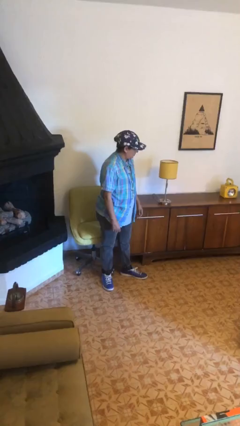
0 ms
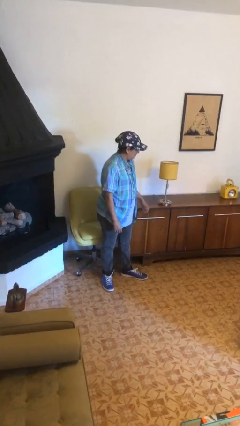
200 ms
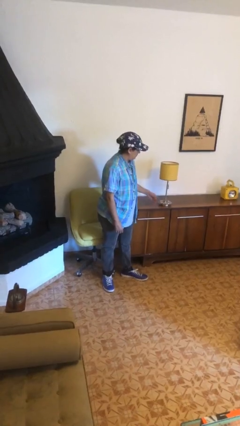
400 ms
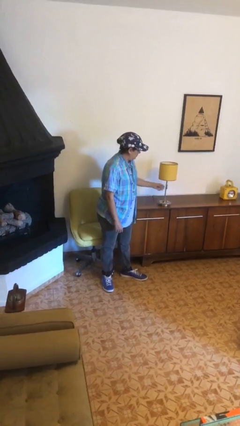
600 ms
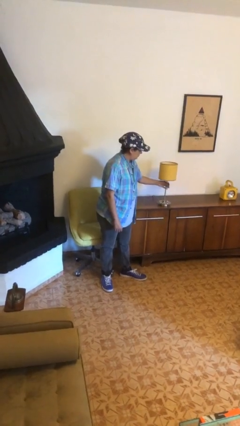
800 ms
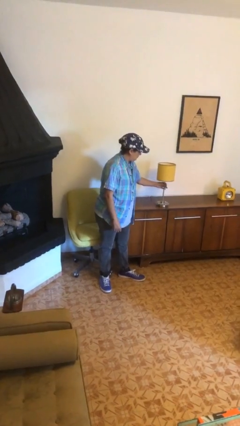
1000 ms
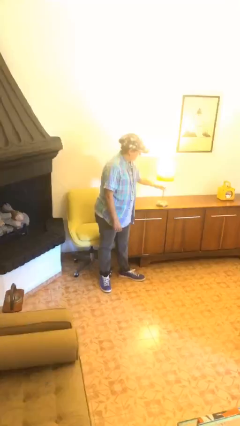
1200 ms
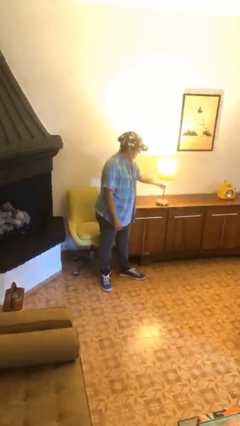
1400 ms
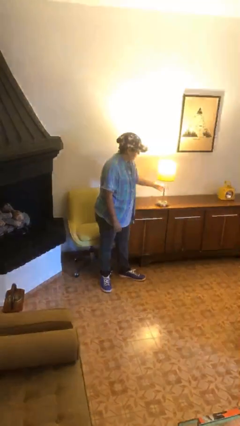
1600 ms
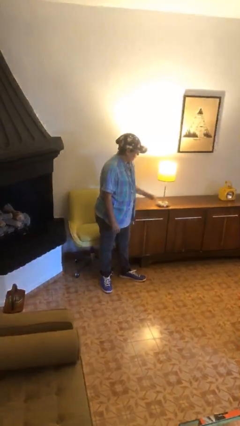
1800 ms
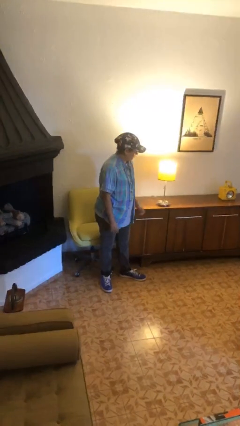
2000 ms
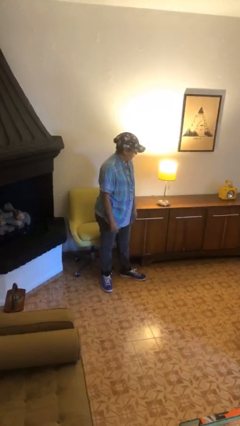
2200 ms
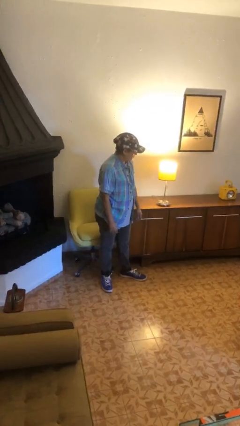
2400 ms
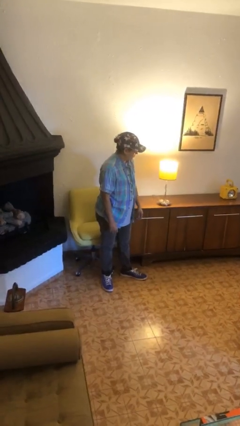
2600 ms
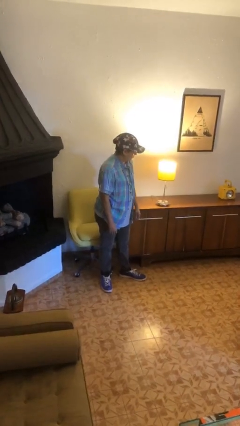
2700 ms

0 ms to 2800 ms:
person turns on lamp

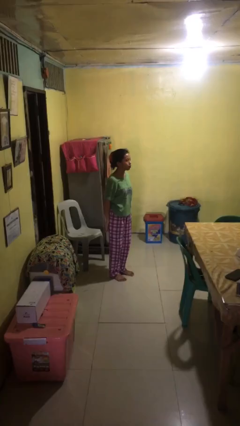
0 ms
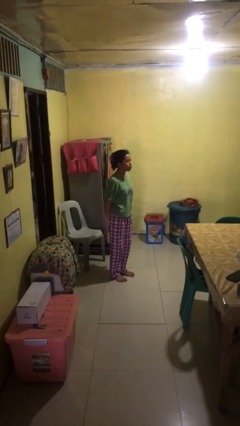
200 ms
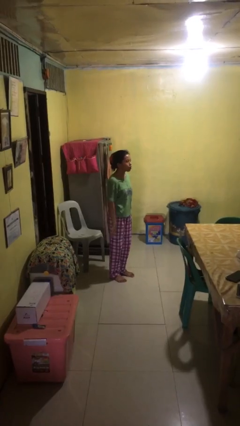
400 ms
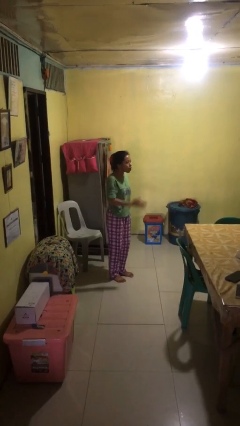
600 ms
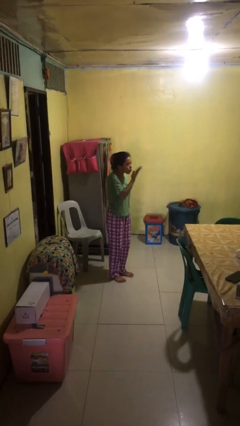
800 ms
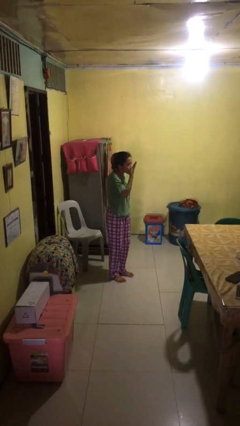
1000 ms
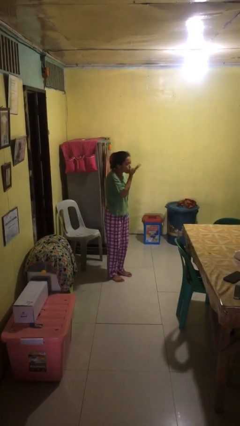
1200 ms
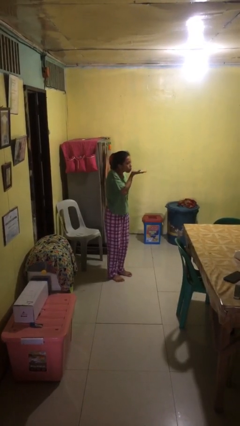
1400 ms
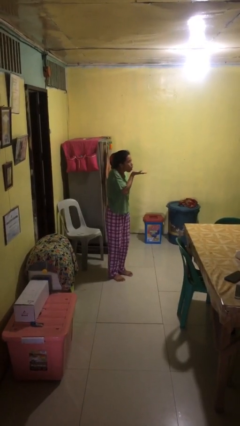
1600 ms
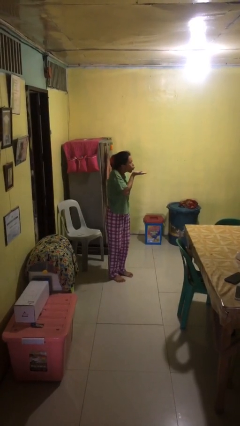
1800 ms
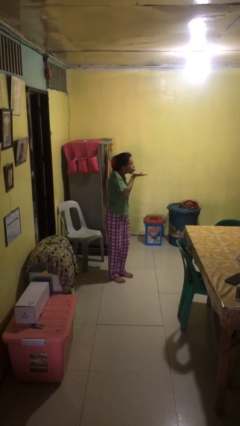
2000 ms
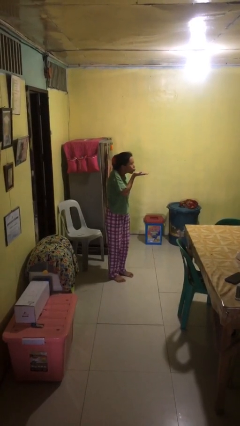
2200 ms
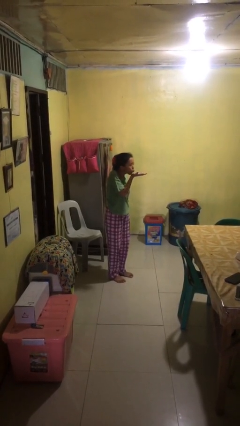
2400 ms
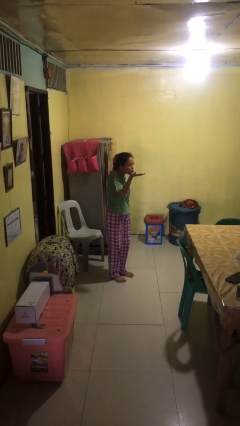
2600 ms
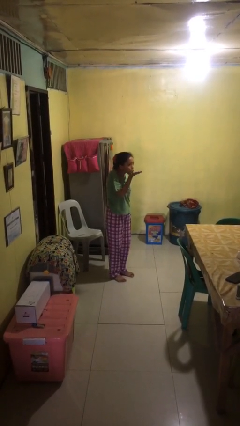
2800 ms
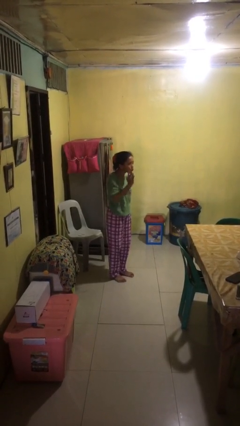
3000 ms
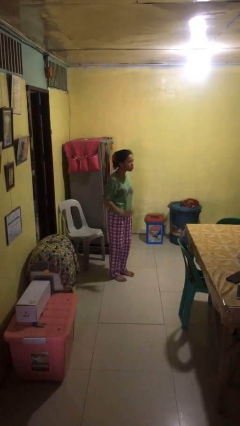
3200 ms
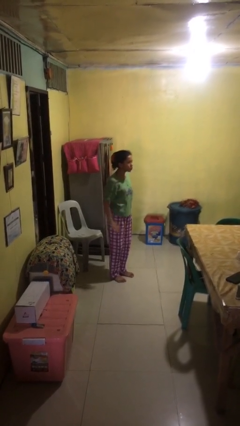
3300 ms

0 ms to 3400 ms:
person gestures blow kiss

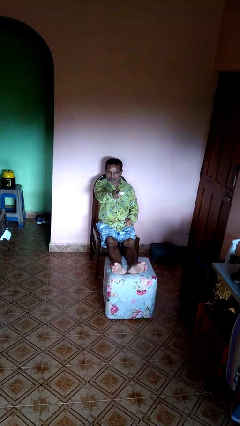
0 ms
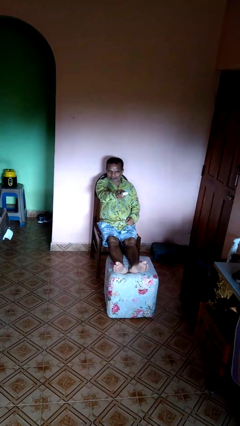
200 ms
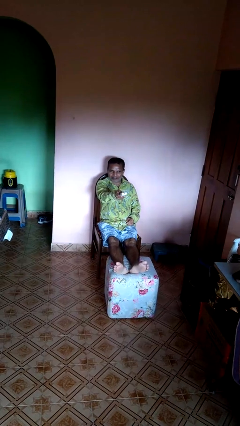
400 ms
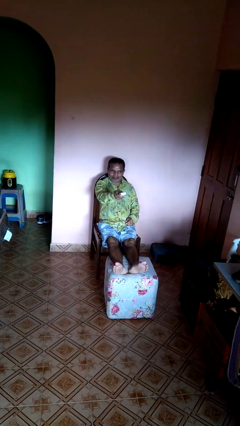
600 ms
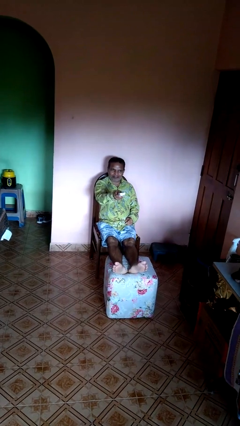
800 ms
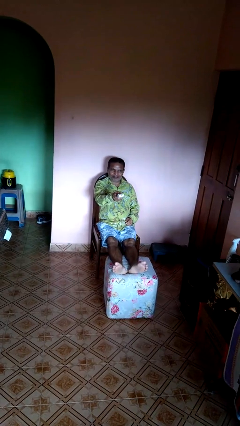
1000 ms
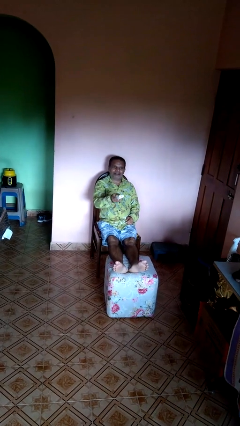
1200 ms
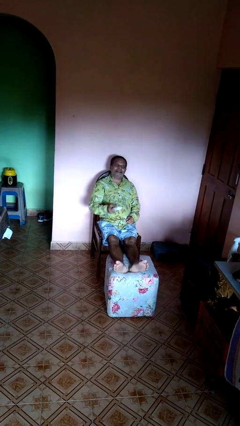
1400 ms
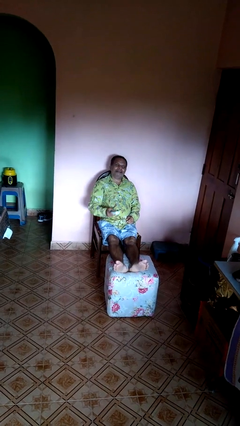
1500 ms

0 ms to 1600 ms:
person uses television remote

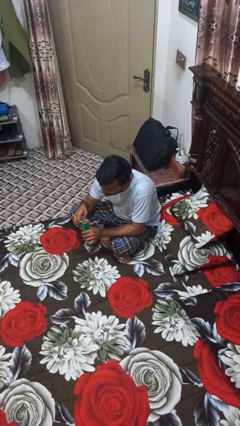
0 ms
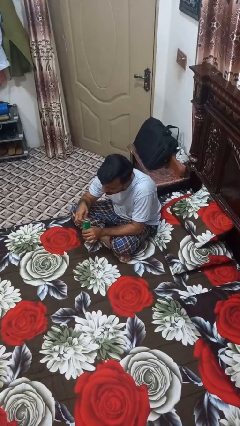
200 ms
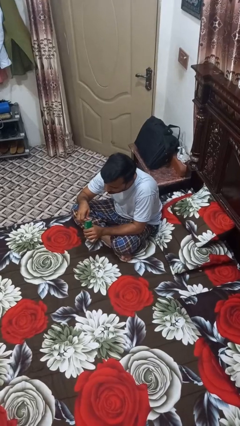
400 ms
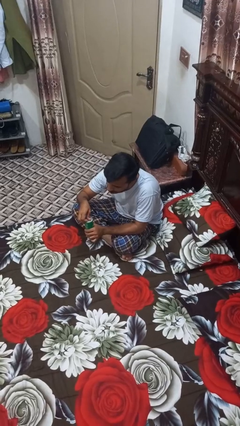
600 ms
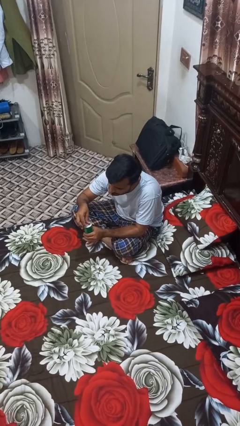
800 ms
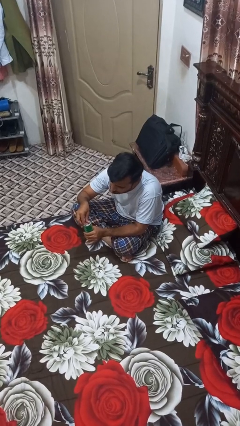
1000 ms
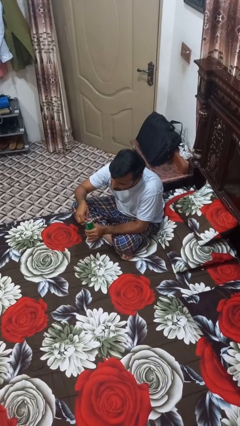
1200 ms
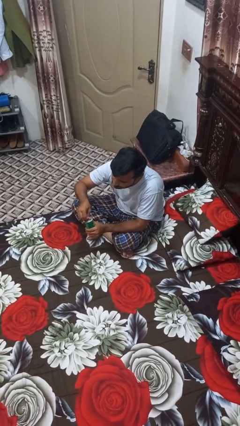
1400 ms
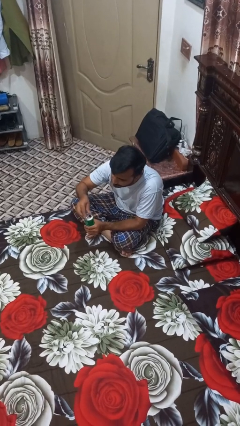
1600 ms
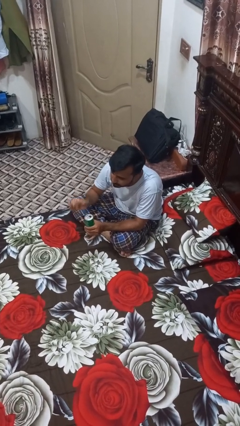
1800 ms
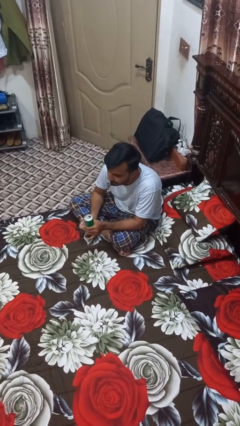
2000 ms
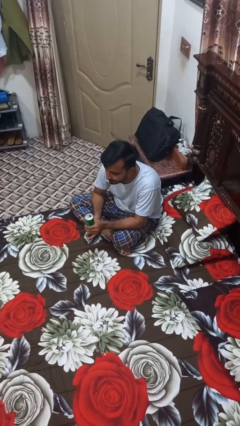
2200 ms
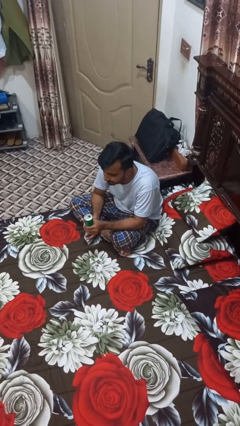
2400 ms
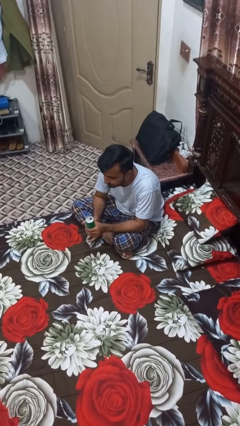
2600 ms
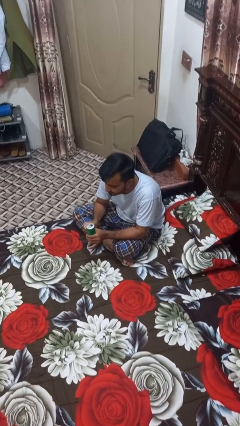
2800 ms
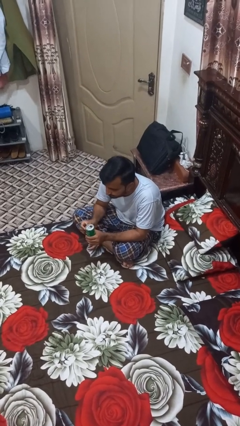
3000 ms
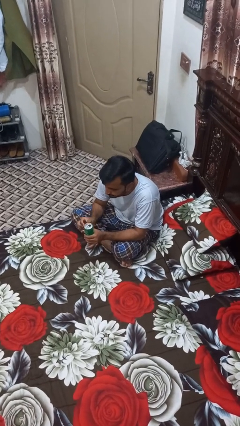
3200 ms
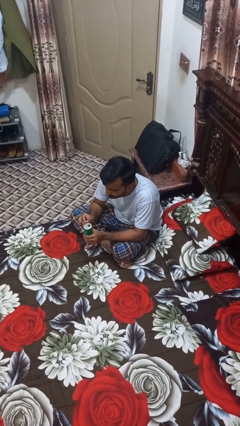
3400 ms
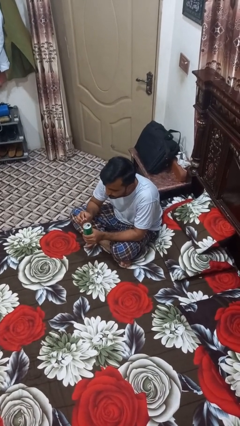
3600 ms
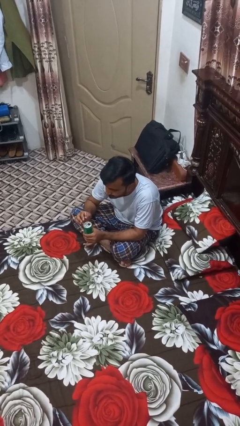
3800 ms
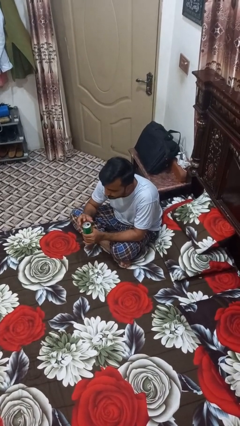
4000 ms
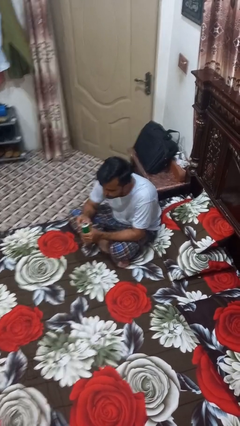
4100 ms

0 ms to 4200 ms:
person opens can with can opener

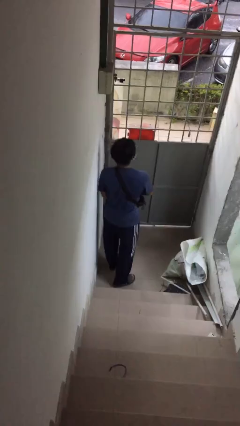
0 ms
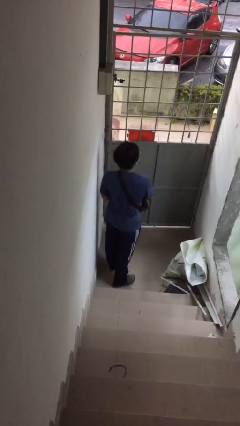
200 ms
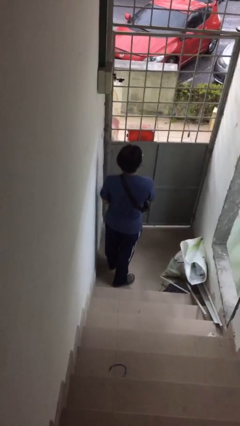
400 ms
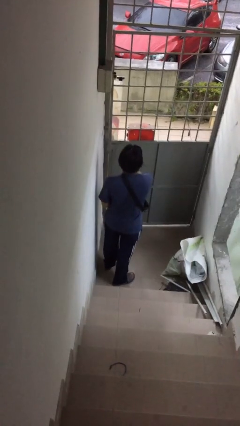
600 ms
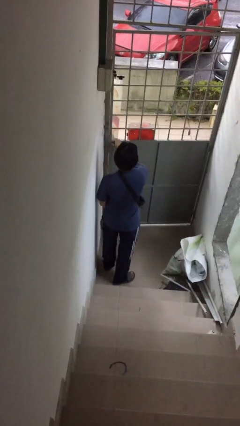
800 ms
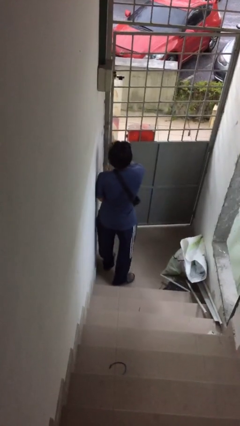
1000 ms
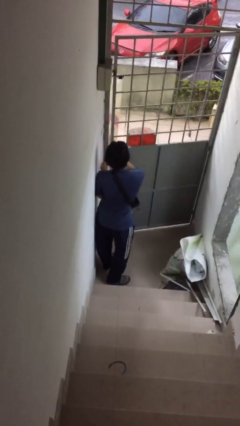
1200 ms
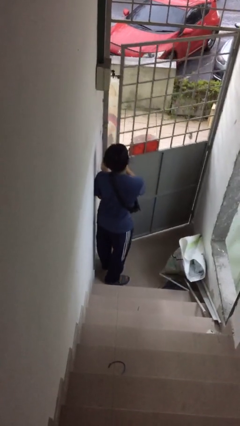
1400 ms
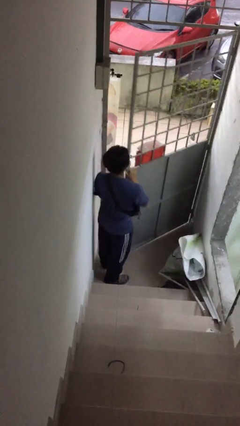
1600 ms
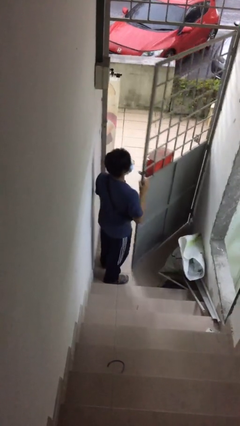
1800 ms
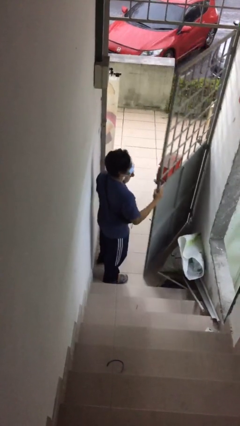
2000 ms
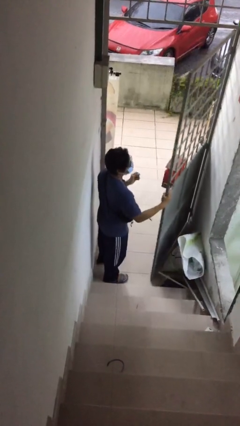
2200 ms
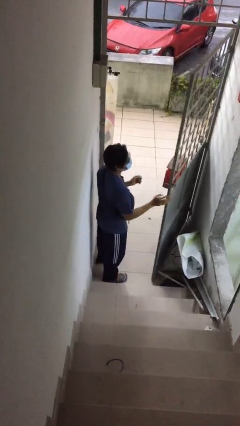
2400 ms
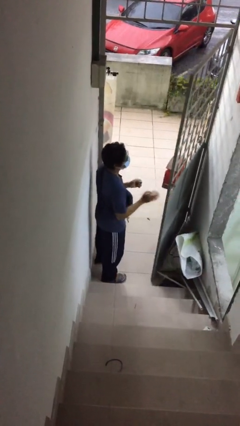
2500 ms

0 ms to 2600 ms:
person opens facility door

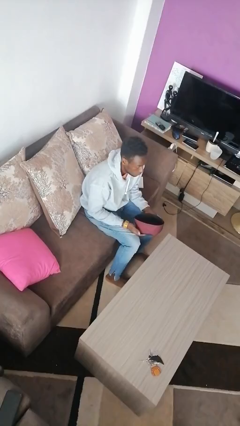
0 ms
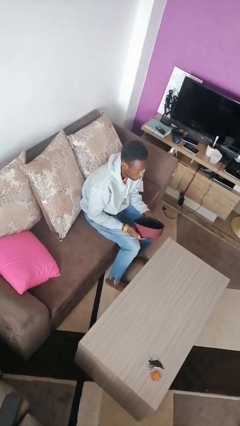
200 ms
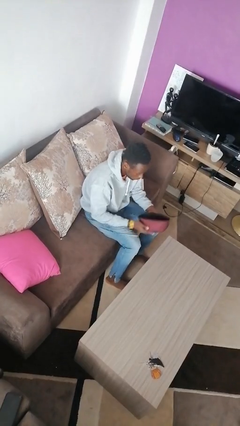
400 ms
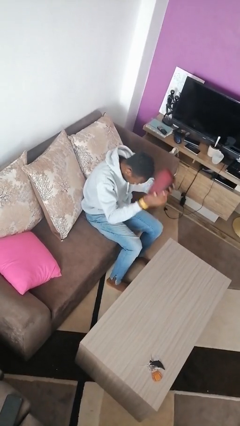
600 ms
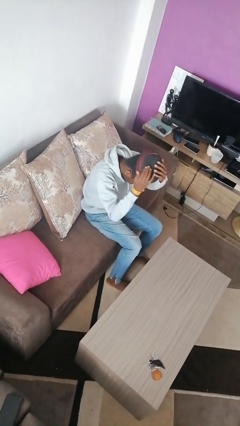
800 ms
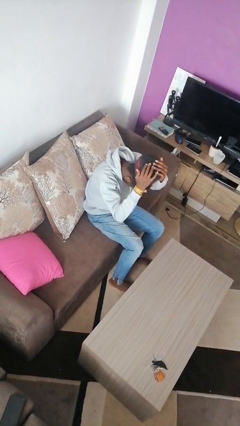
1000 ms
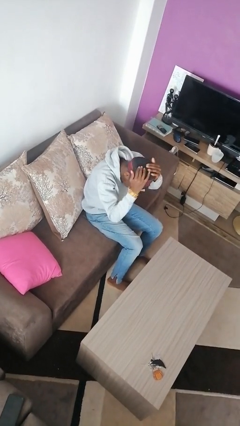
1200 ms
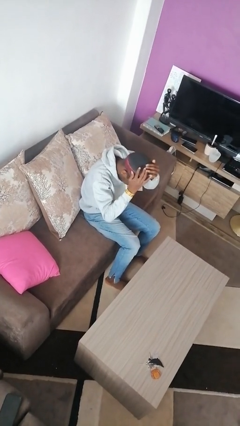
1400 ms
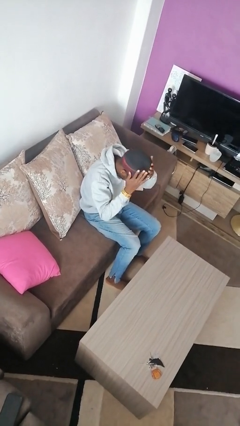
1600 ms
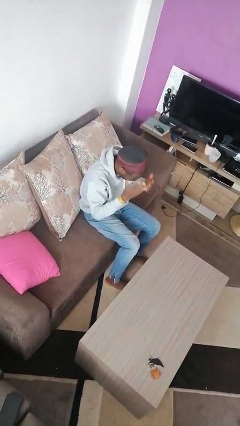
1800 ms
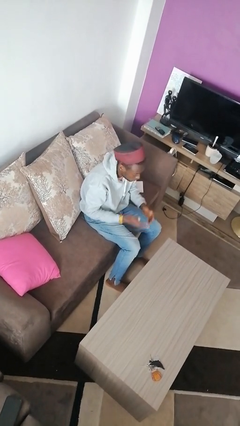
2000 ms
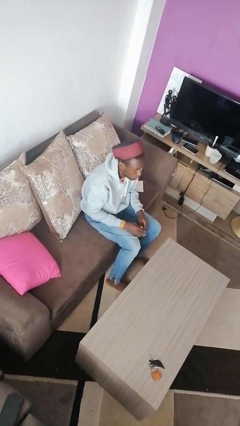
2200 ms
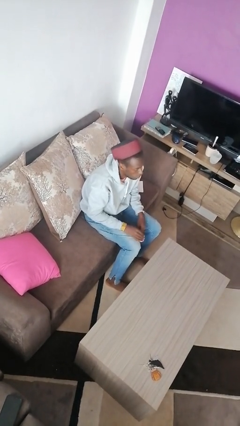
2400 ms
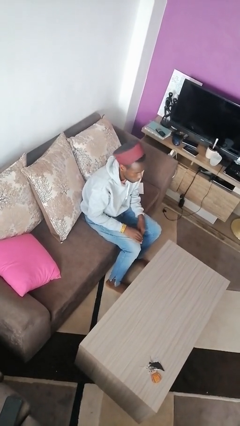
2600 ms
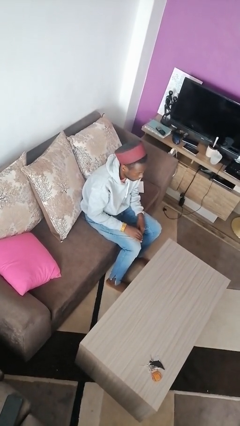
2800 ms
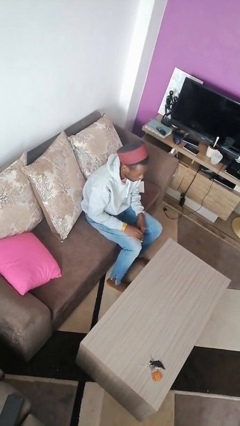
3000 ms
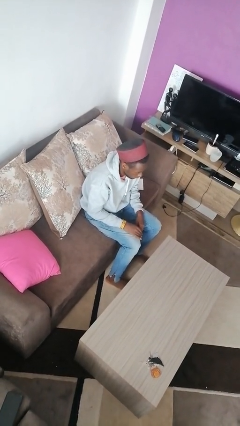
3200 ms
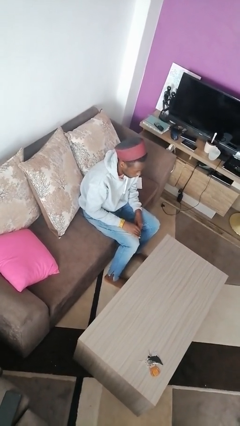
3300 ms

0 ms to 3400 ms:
person puts on hat
